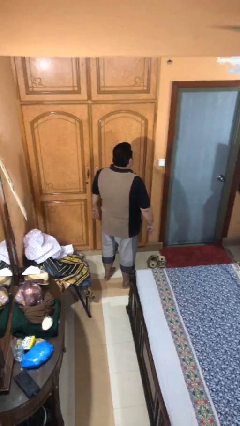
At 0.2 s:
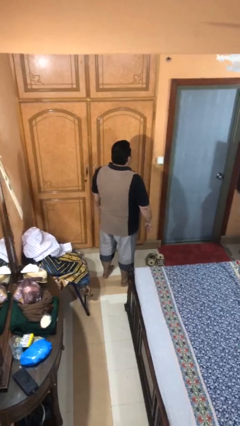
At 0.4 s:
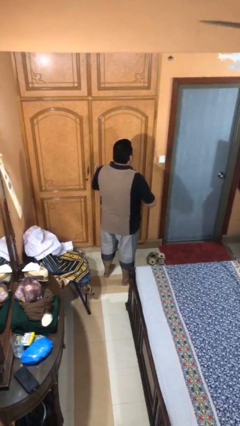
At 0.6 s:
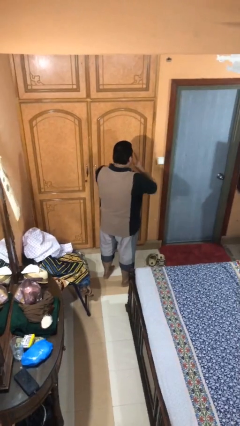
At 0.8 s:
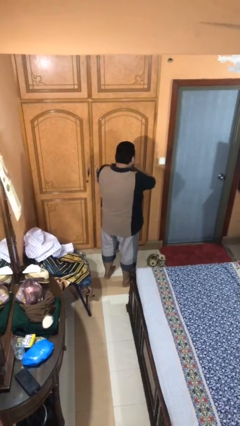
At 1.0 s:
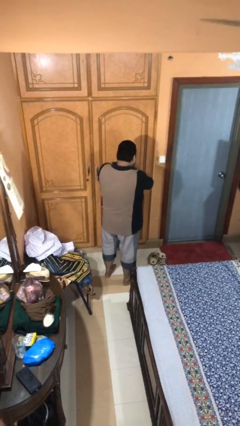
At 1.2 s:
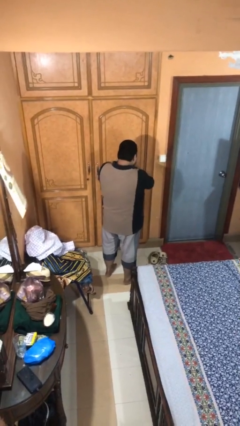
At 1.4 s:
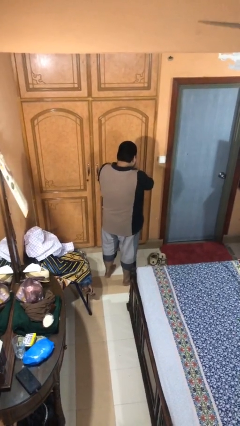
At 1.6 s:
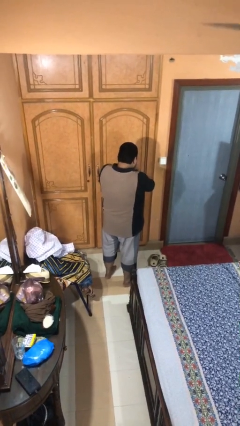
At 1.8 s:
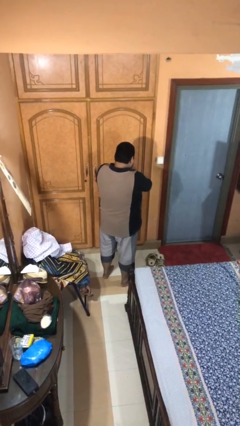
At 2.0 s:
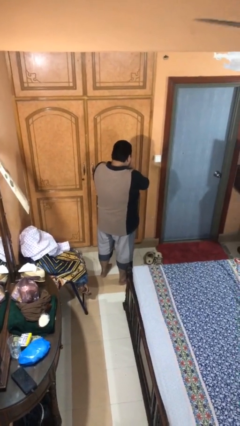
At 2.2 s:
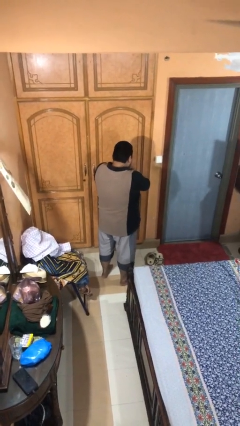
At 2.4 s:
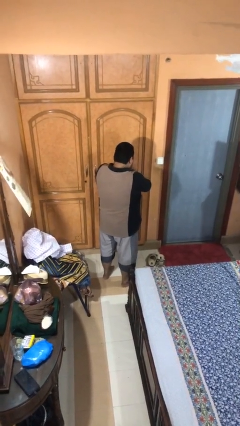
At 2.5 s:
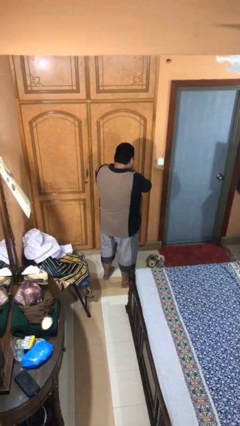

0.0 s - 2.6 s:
person covers face with hands

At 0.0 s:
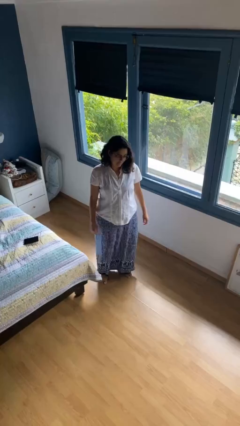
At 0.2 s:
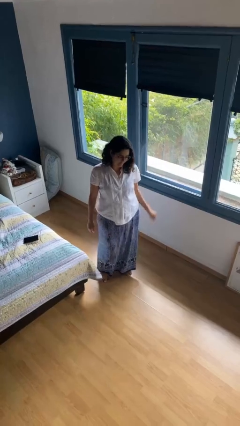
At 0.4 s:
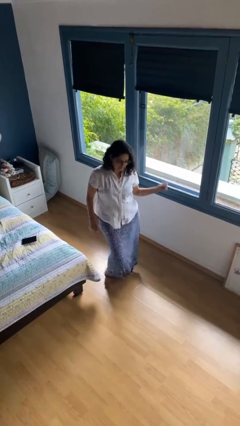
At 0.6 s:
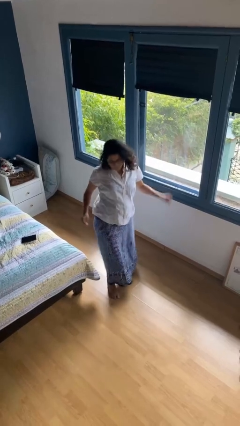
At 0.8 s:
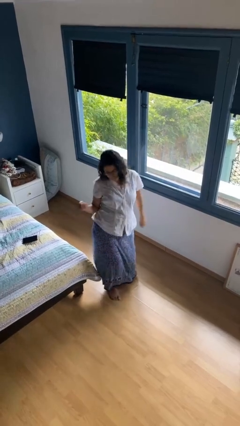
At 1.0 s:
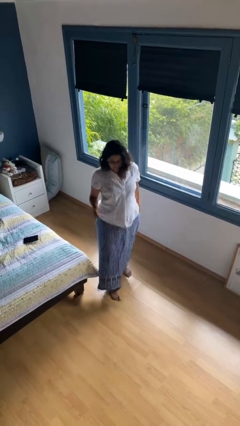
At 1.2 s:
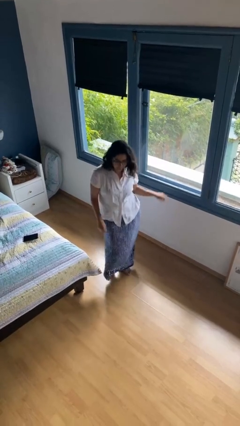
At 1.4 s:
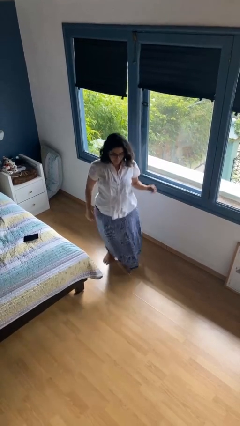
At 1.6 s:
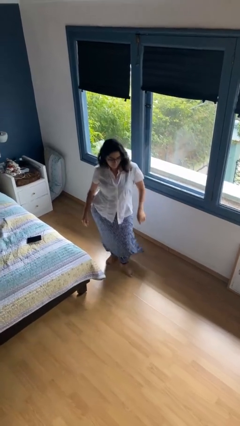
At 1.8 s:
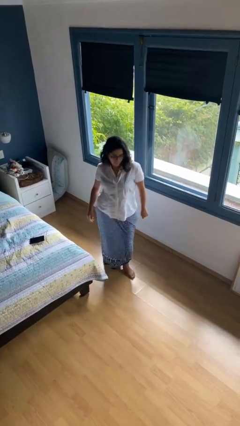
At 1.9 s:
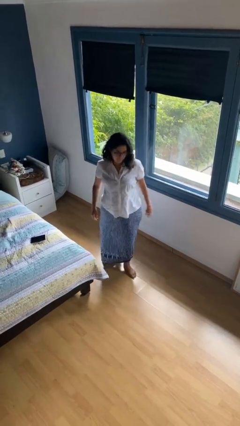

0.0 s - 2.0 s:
person dances in place

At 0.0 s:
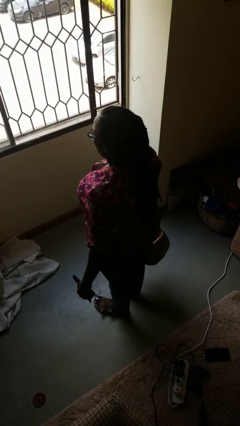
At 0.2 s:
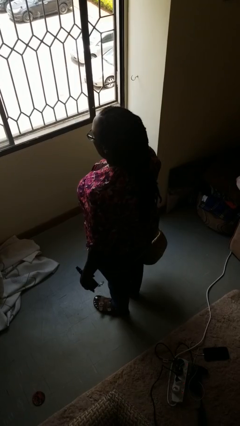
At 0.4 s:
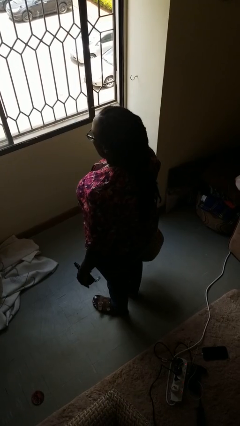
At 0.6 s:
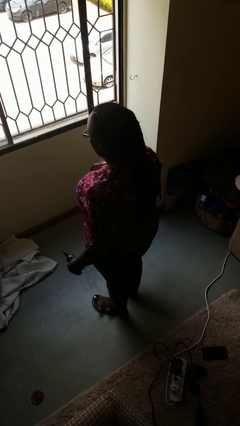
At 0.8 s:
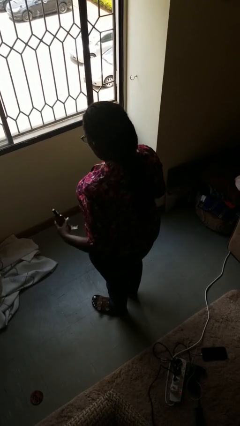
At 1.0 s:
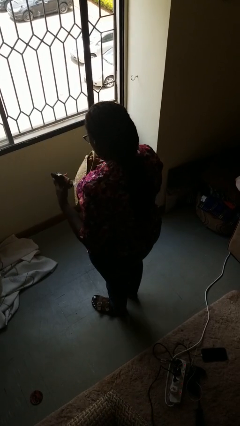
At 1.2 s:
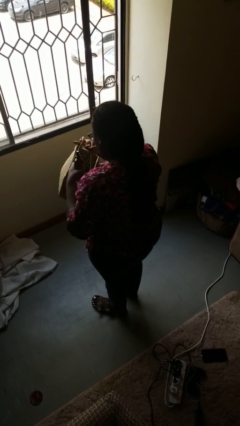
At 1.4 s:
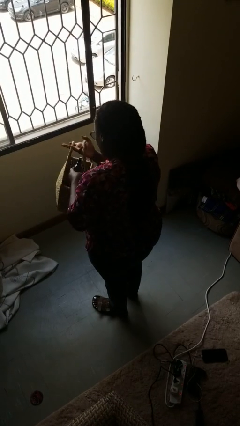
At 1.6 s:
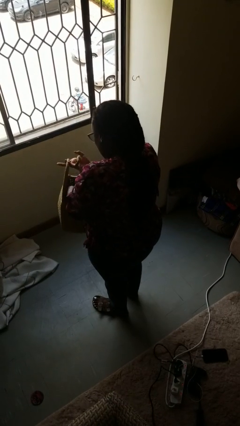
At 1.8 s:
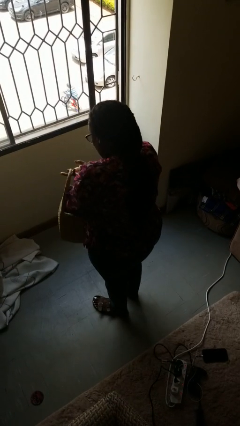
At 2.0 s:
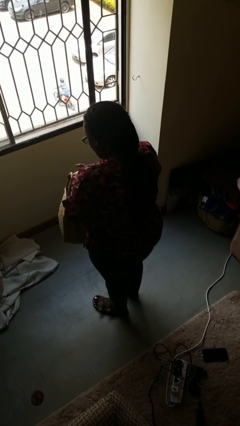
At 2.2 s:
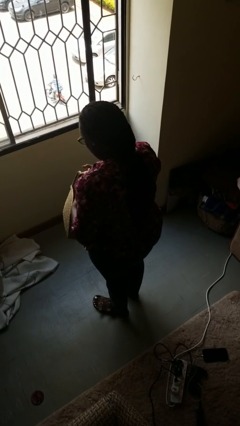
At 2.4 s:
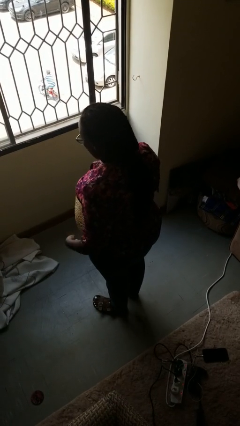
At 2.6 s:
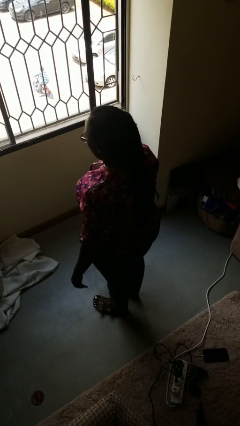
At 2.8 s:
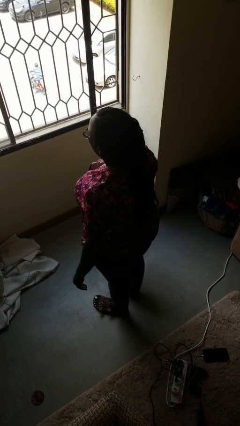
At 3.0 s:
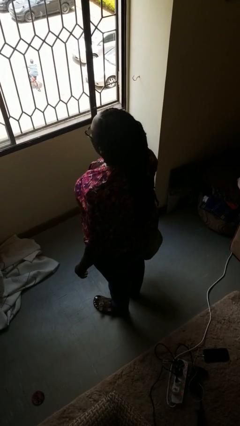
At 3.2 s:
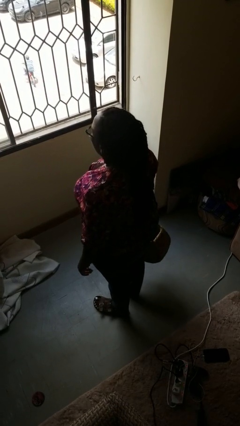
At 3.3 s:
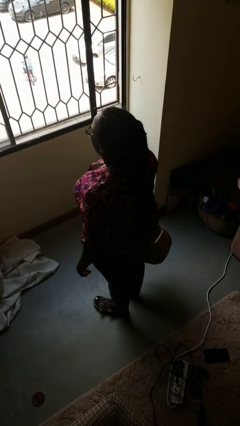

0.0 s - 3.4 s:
person puts object into basket

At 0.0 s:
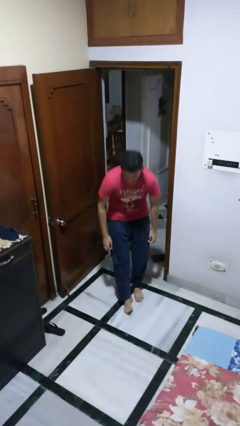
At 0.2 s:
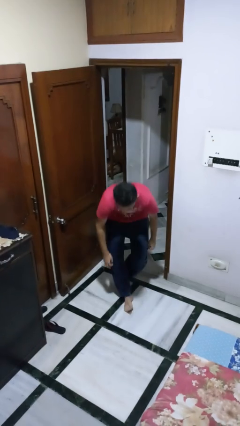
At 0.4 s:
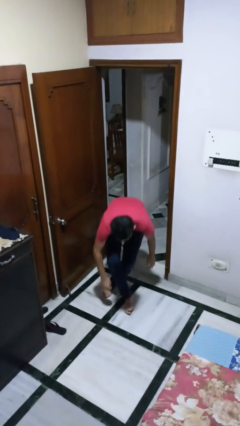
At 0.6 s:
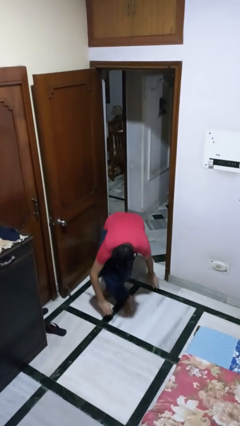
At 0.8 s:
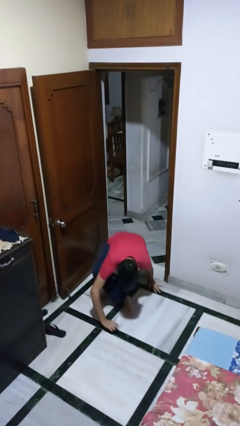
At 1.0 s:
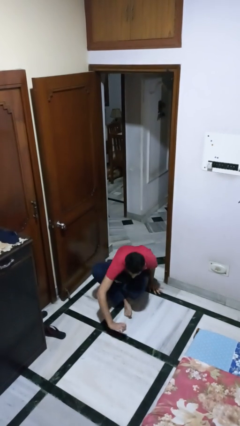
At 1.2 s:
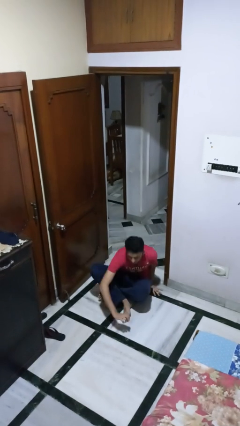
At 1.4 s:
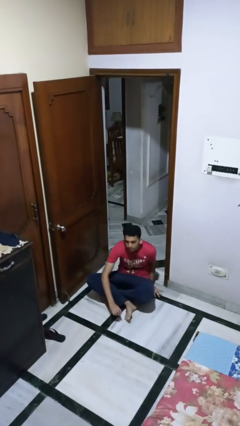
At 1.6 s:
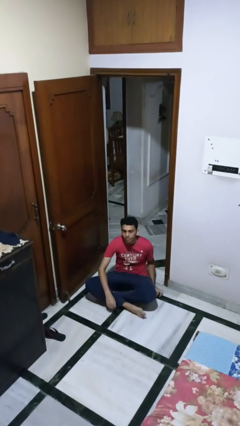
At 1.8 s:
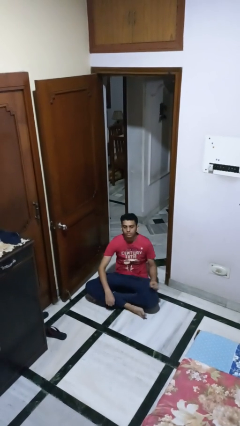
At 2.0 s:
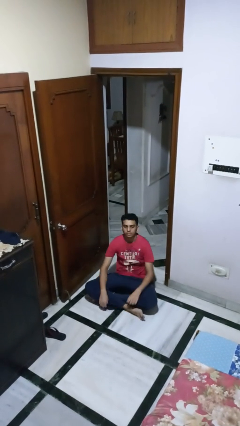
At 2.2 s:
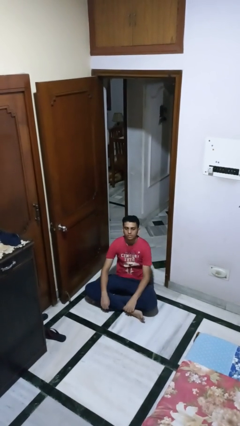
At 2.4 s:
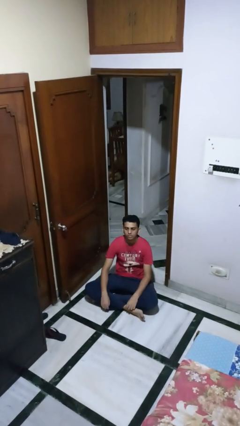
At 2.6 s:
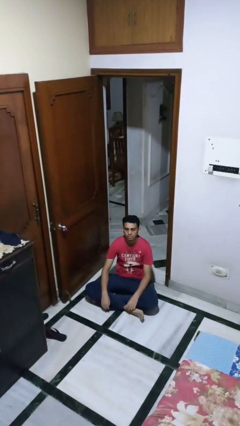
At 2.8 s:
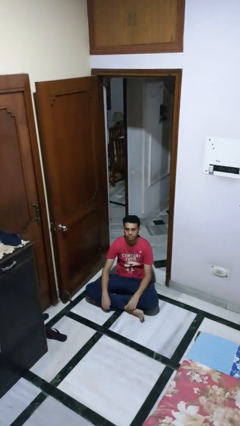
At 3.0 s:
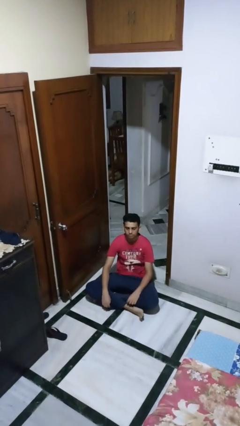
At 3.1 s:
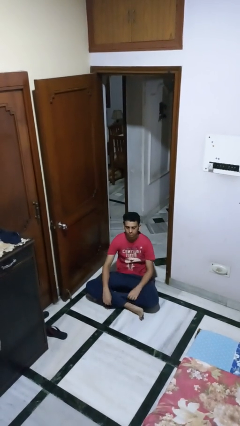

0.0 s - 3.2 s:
person sits crisscross

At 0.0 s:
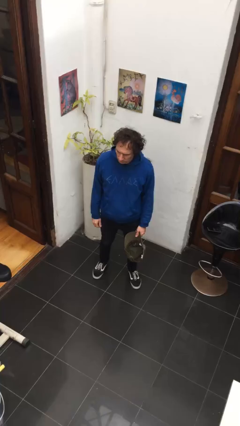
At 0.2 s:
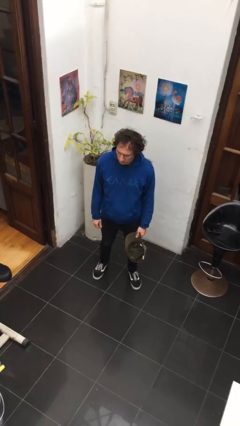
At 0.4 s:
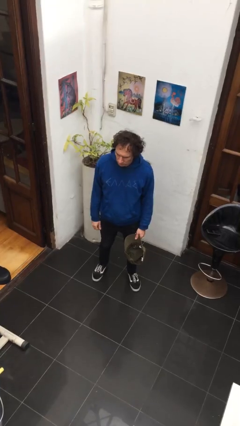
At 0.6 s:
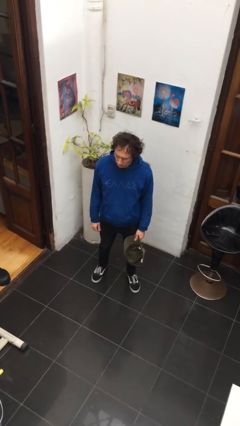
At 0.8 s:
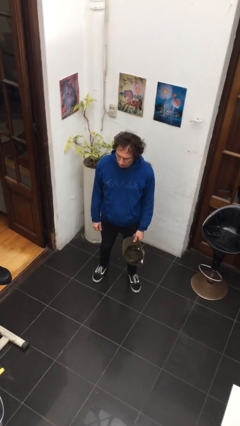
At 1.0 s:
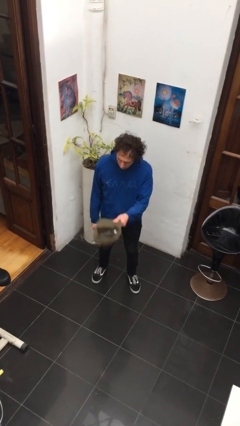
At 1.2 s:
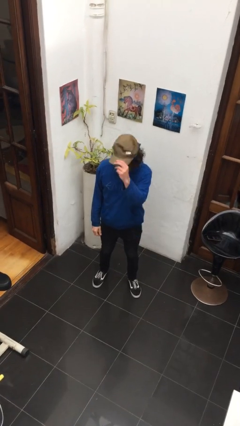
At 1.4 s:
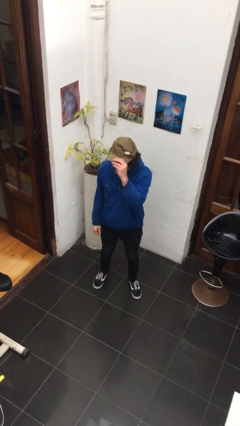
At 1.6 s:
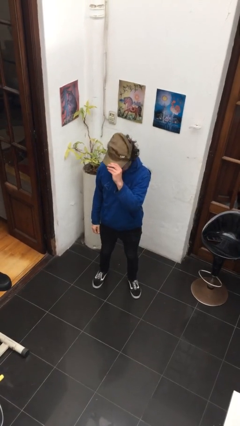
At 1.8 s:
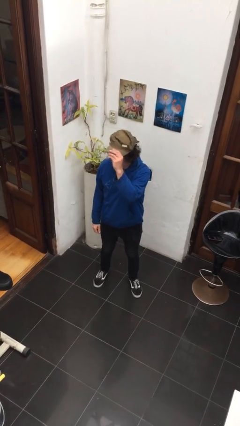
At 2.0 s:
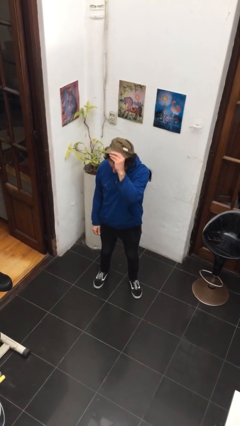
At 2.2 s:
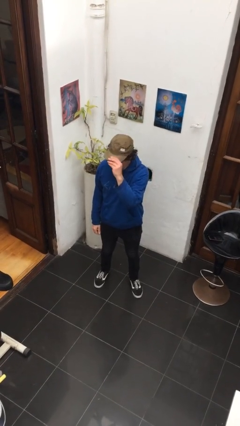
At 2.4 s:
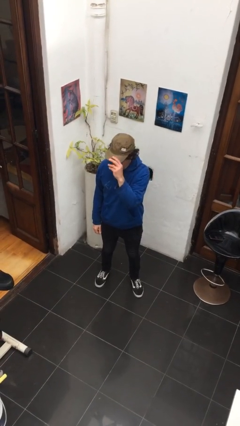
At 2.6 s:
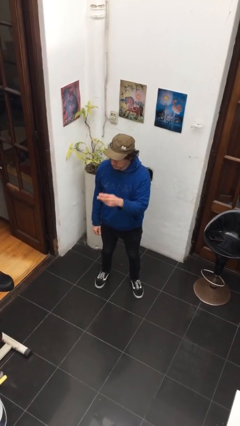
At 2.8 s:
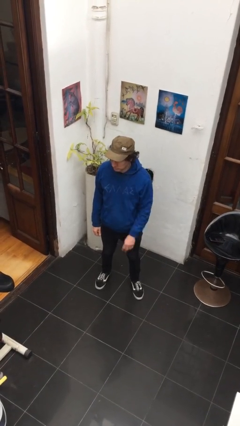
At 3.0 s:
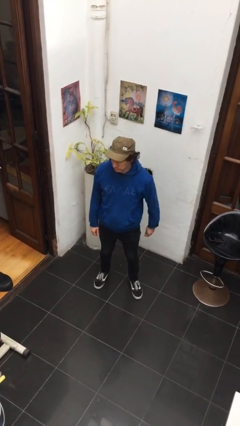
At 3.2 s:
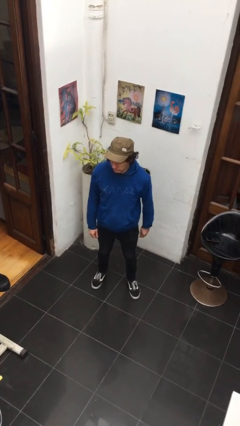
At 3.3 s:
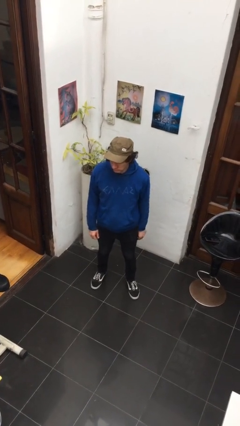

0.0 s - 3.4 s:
person puts on hat

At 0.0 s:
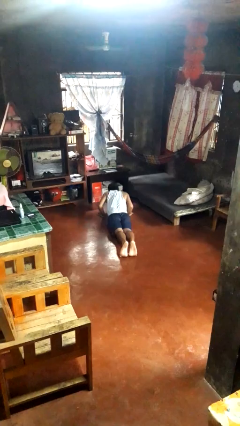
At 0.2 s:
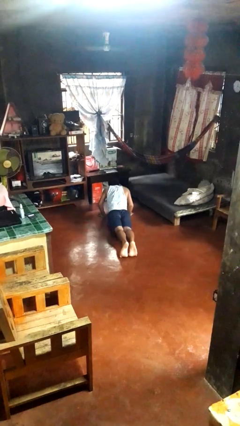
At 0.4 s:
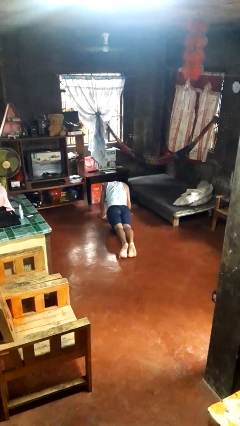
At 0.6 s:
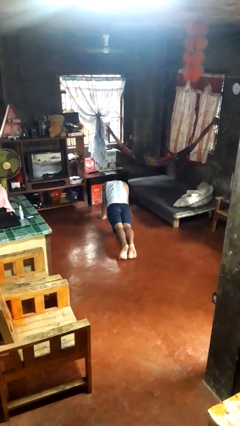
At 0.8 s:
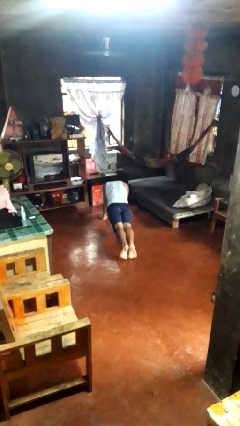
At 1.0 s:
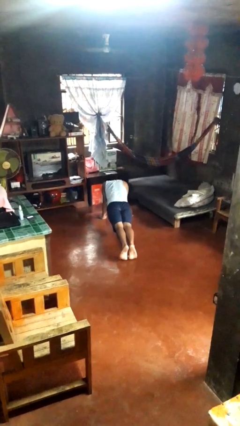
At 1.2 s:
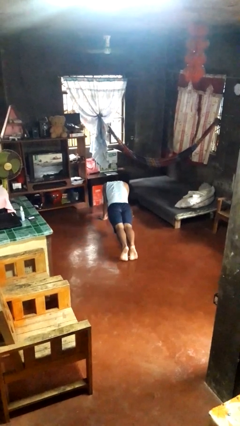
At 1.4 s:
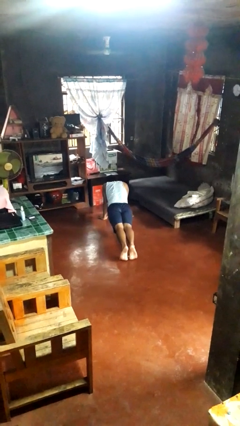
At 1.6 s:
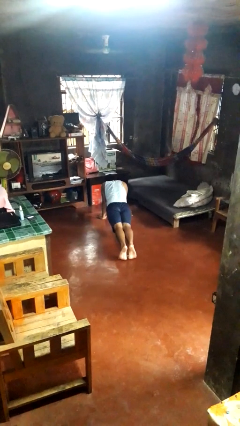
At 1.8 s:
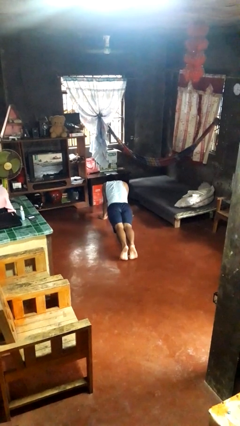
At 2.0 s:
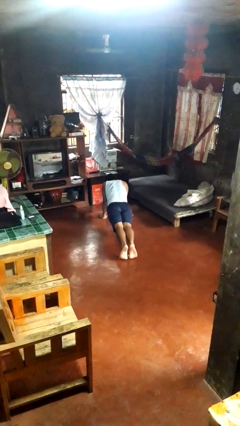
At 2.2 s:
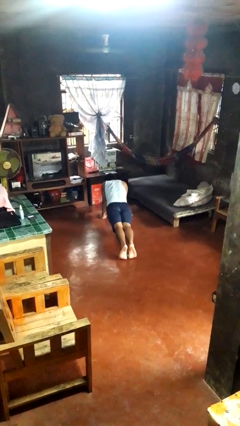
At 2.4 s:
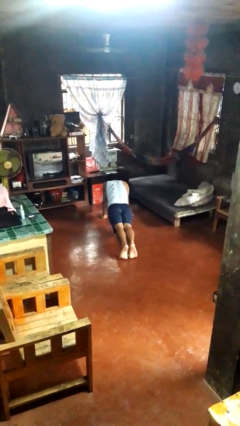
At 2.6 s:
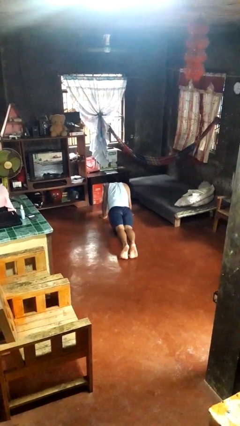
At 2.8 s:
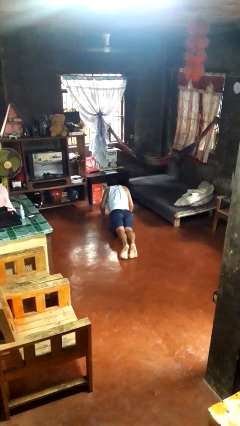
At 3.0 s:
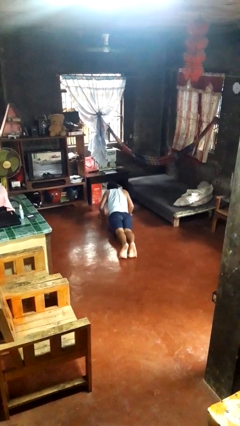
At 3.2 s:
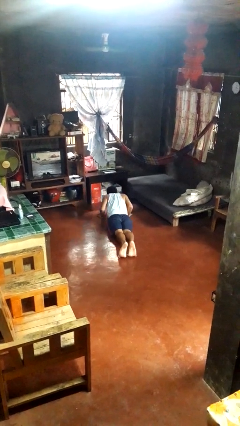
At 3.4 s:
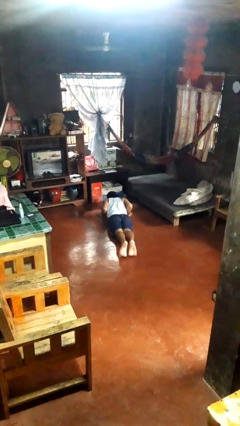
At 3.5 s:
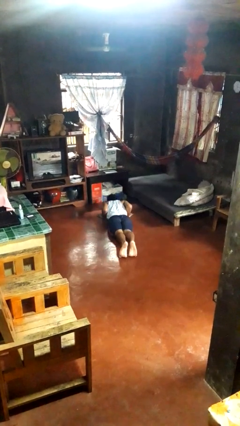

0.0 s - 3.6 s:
person exercises with pushup
